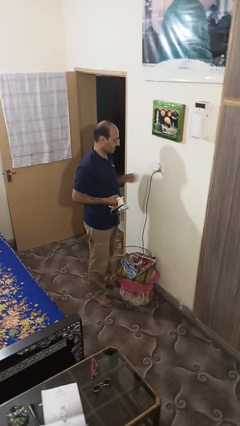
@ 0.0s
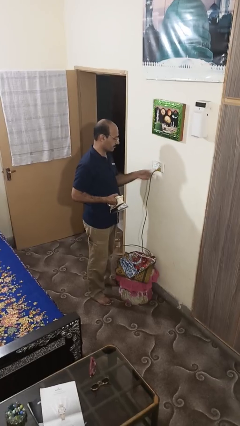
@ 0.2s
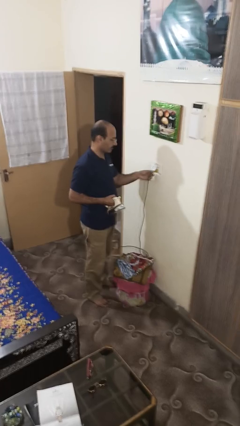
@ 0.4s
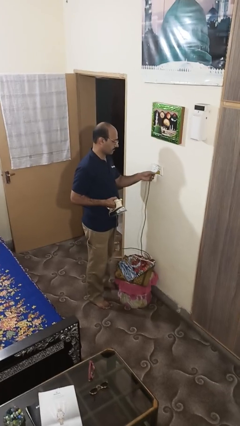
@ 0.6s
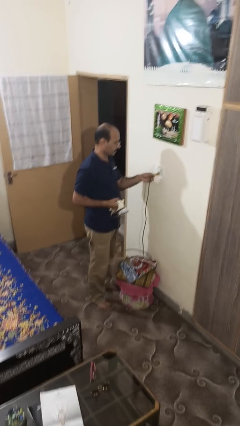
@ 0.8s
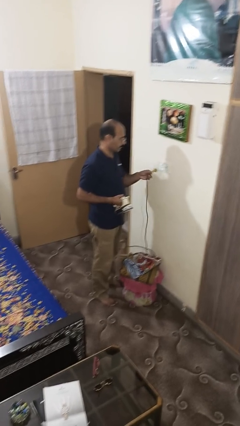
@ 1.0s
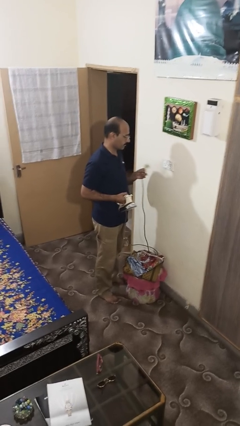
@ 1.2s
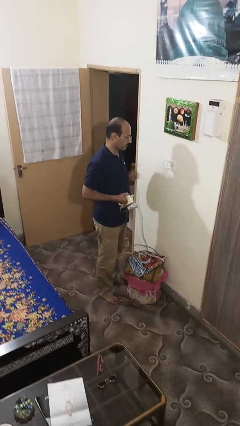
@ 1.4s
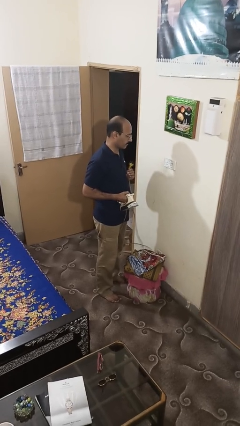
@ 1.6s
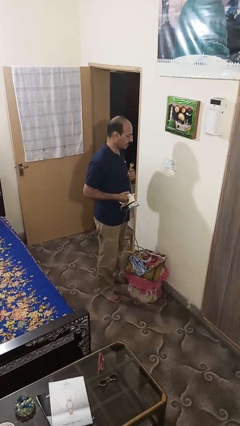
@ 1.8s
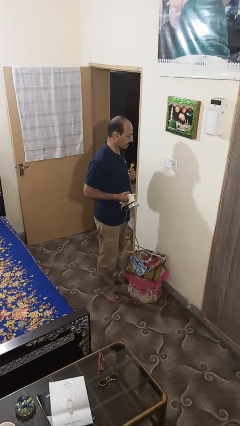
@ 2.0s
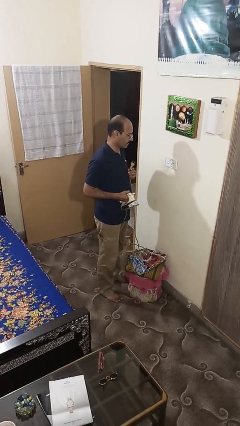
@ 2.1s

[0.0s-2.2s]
person unplugs from electrical socket

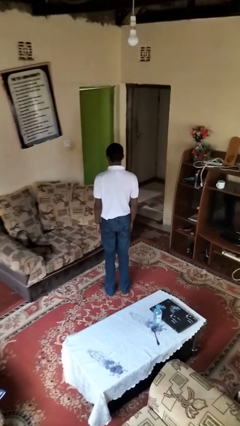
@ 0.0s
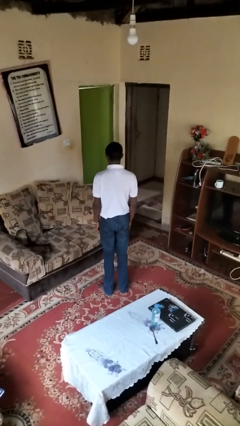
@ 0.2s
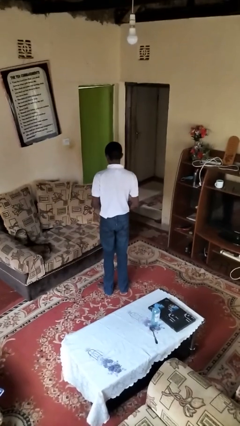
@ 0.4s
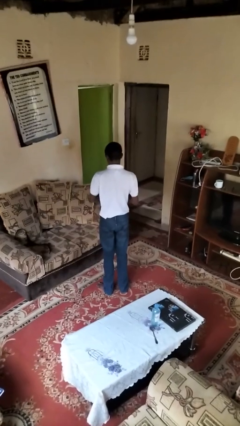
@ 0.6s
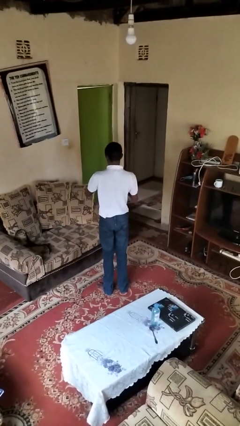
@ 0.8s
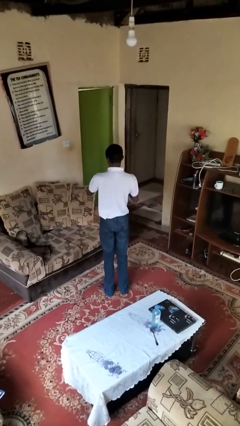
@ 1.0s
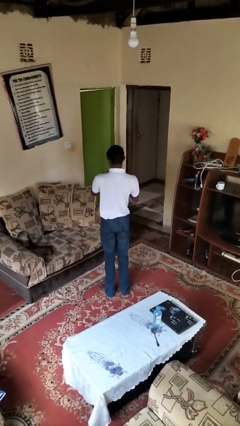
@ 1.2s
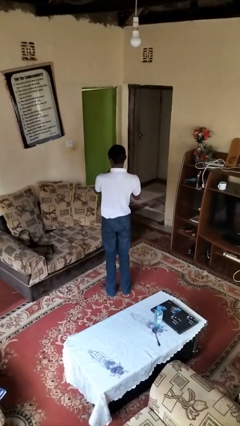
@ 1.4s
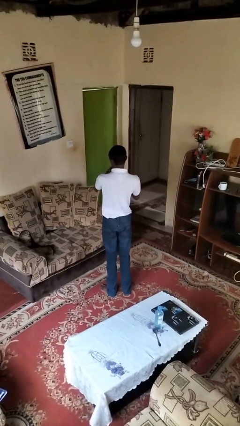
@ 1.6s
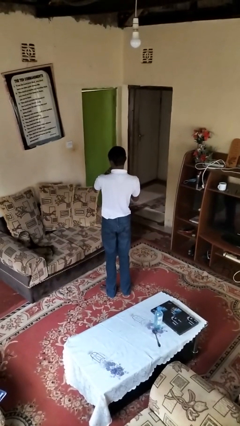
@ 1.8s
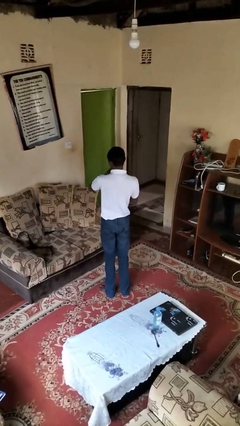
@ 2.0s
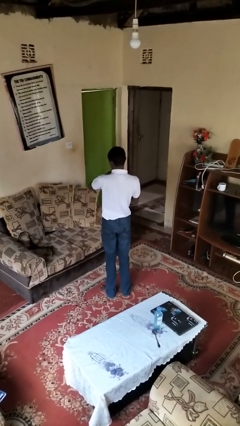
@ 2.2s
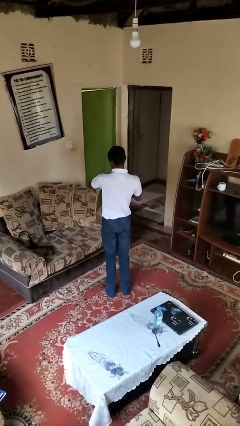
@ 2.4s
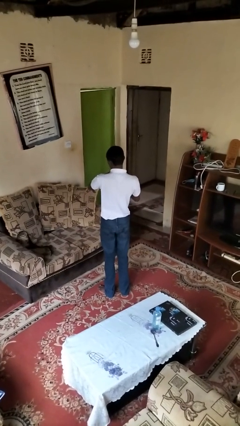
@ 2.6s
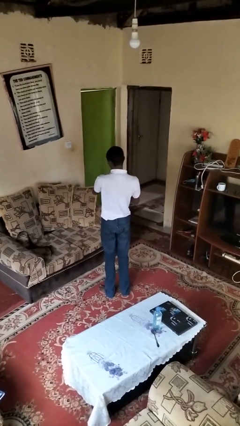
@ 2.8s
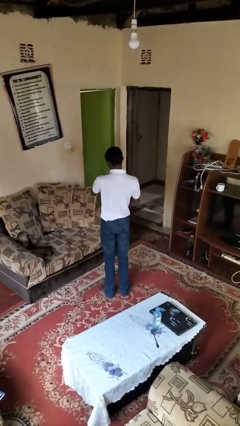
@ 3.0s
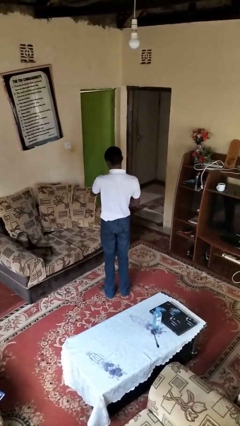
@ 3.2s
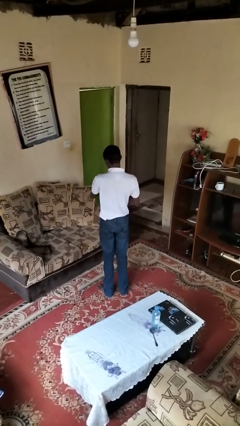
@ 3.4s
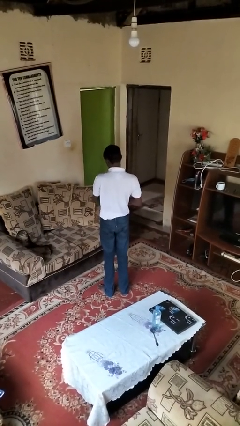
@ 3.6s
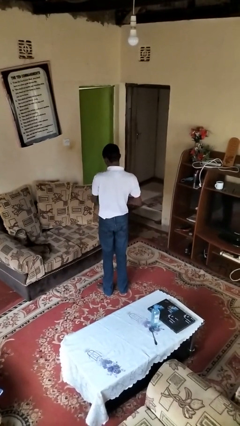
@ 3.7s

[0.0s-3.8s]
person puts on wristwatch

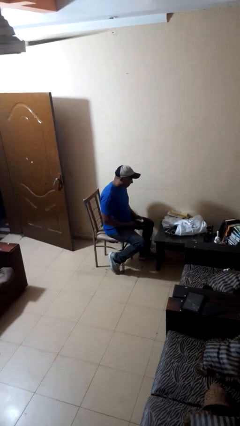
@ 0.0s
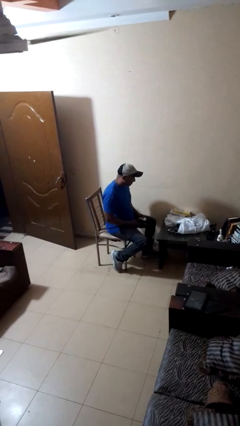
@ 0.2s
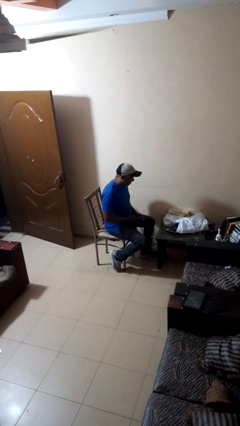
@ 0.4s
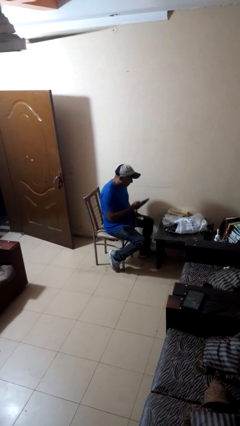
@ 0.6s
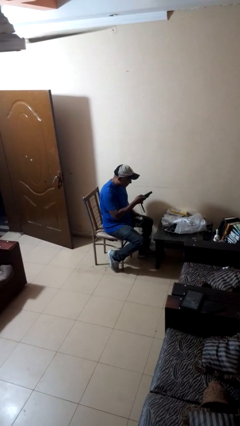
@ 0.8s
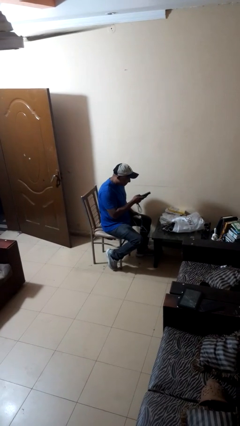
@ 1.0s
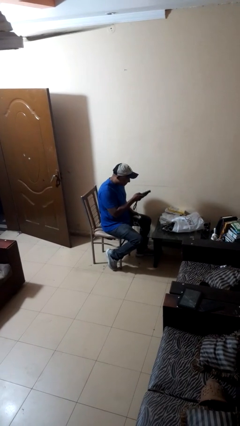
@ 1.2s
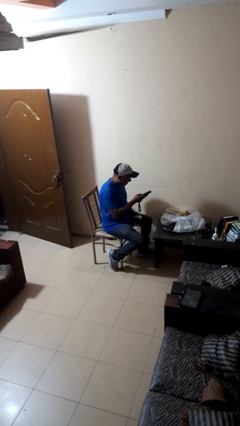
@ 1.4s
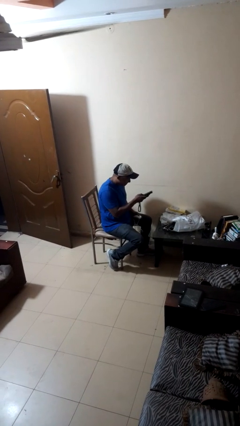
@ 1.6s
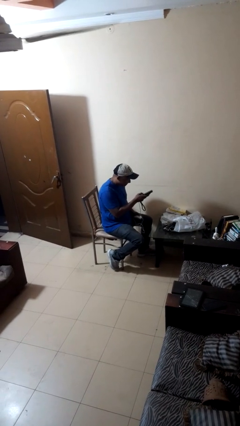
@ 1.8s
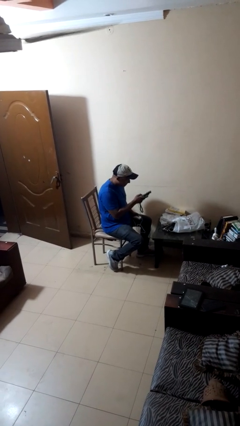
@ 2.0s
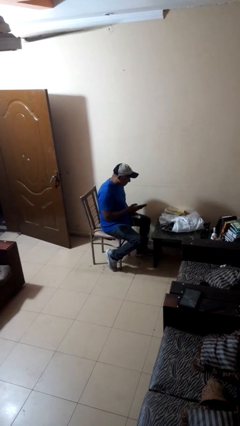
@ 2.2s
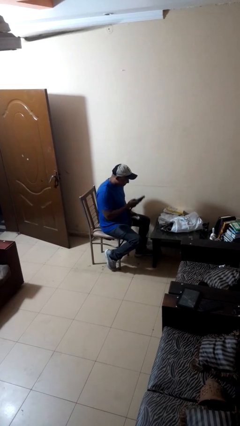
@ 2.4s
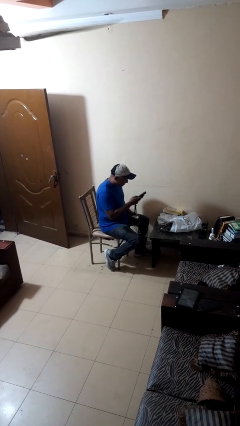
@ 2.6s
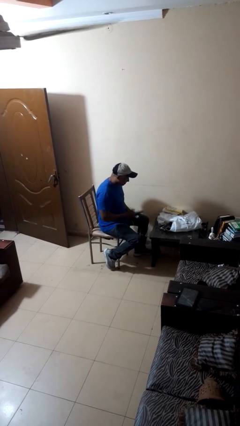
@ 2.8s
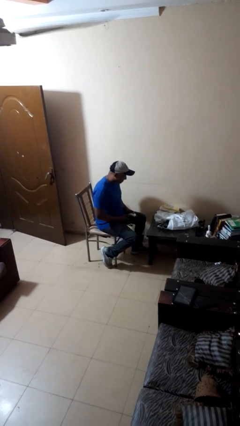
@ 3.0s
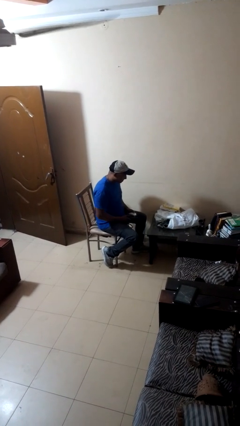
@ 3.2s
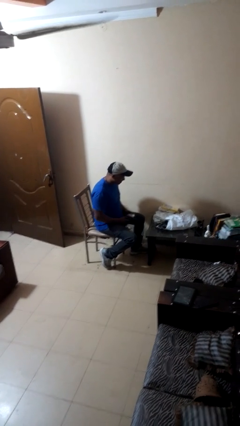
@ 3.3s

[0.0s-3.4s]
person interacts with handheld game

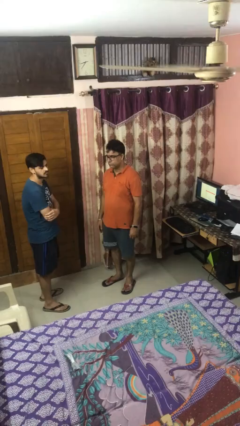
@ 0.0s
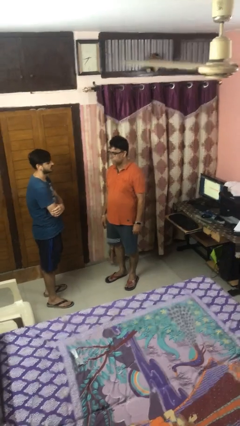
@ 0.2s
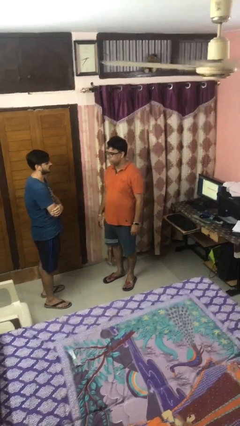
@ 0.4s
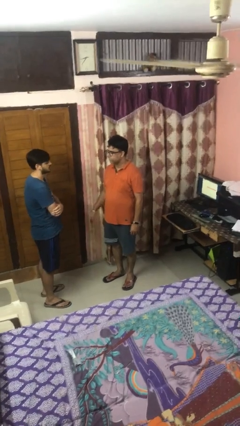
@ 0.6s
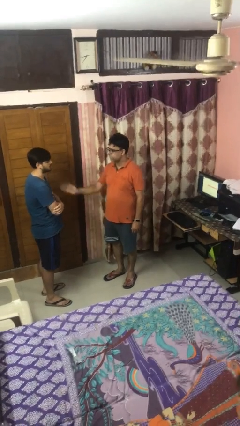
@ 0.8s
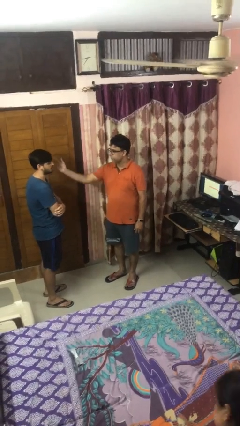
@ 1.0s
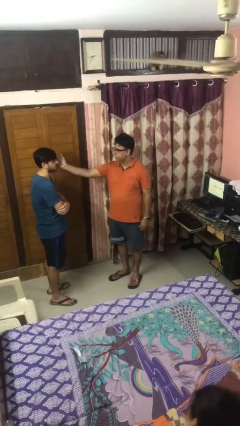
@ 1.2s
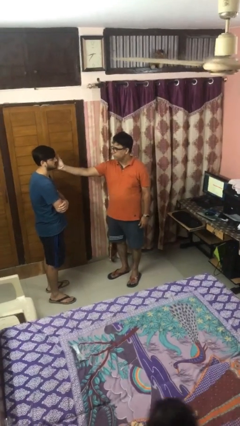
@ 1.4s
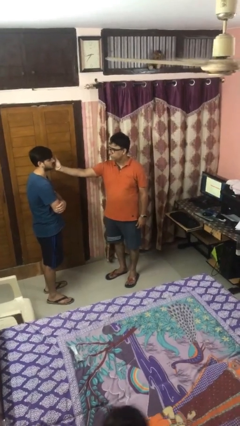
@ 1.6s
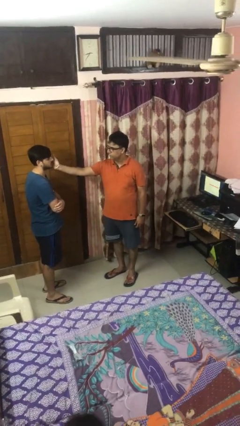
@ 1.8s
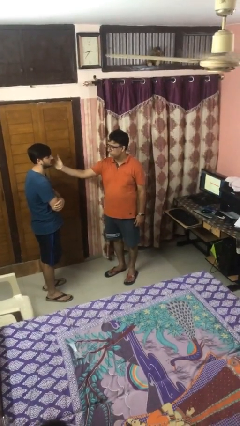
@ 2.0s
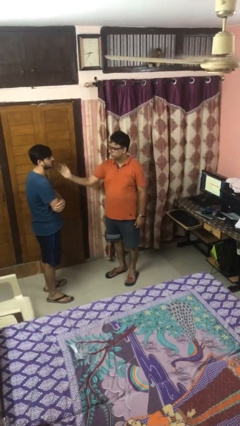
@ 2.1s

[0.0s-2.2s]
person touches face of person

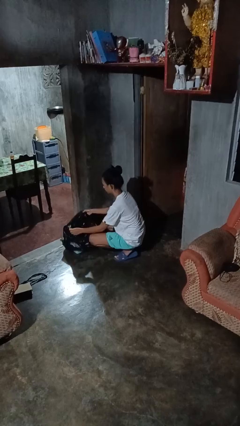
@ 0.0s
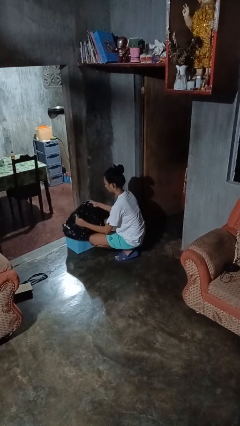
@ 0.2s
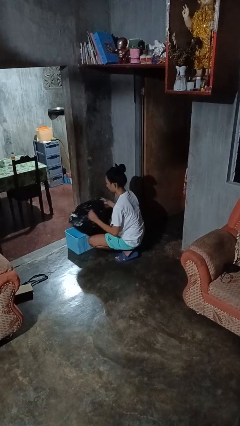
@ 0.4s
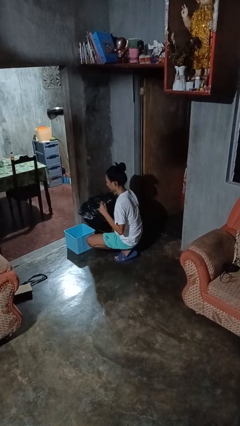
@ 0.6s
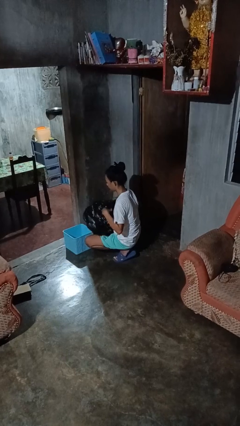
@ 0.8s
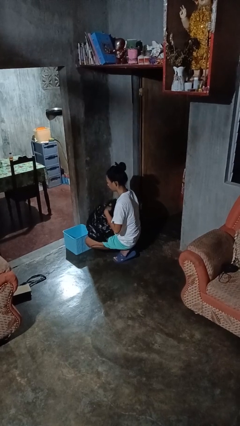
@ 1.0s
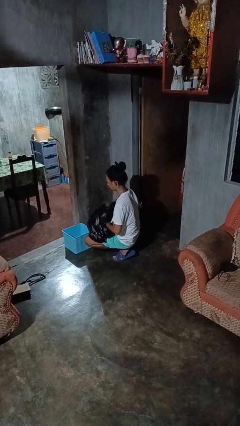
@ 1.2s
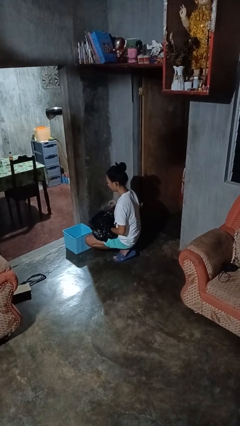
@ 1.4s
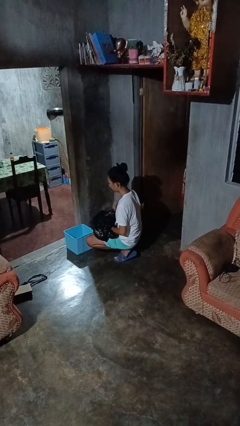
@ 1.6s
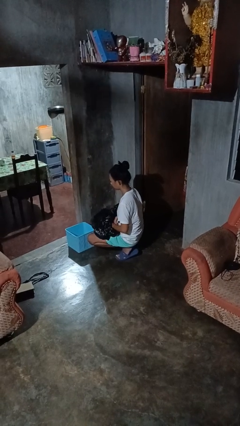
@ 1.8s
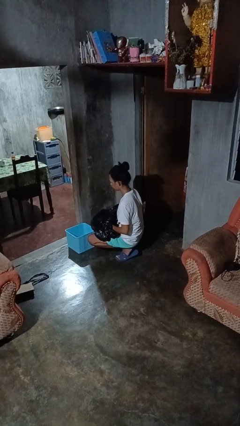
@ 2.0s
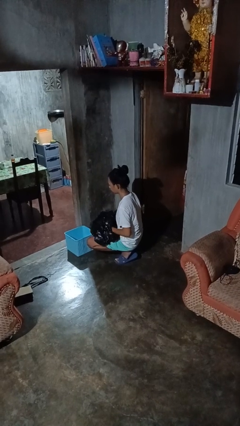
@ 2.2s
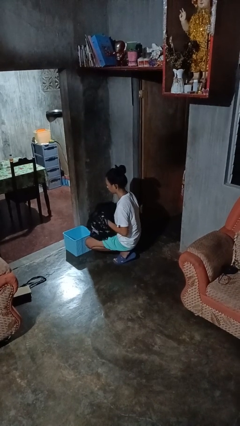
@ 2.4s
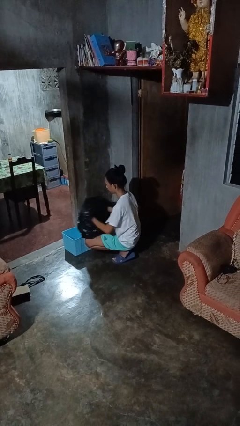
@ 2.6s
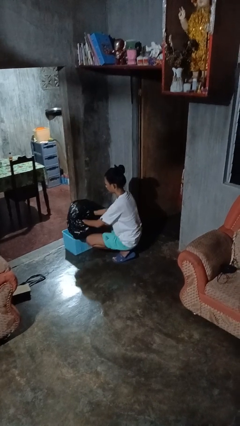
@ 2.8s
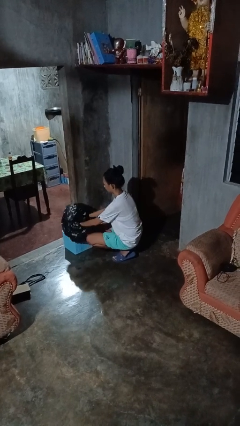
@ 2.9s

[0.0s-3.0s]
person removes trashbag from trashcan

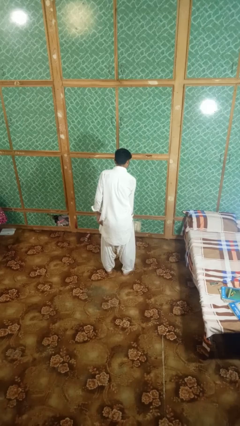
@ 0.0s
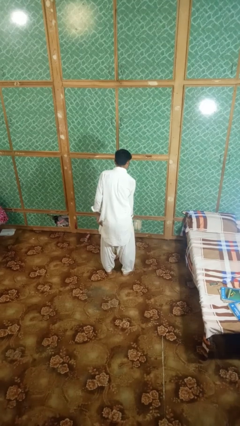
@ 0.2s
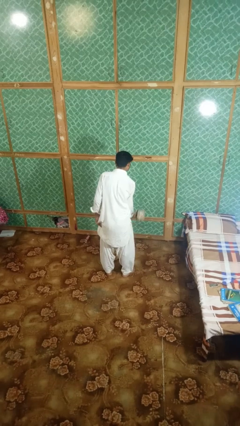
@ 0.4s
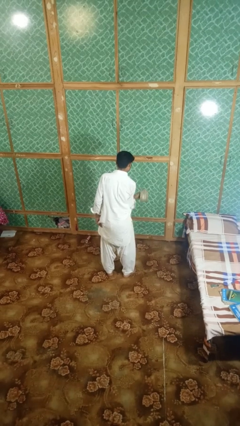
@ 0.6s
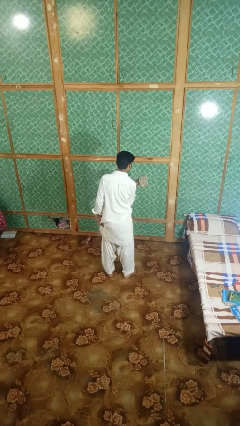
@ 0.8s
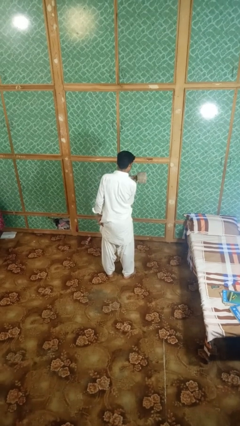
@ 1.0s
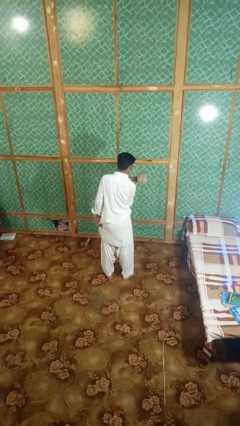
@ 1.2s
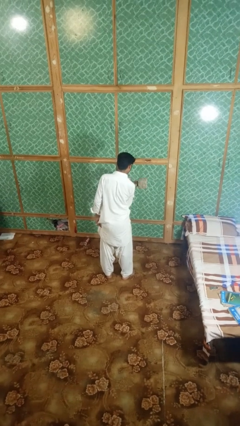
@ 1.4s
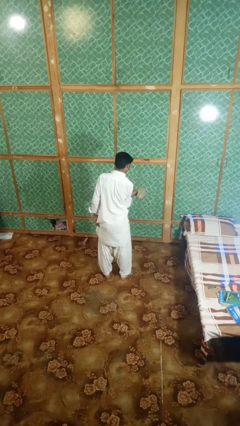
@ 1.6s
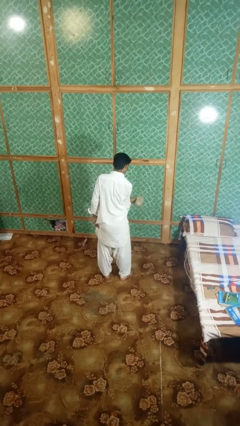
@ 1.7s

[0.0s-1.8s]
person lifts dumbbells

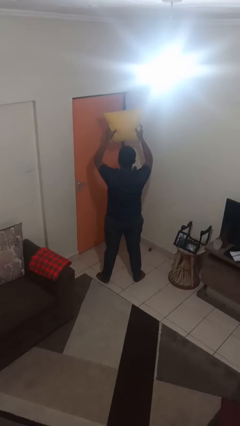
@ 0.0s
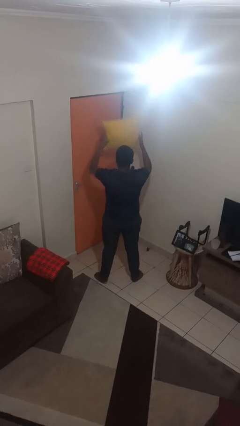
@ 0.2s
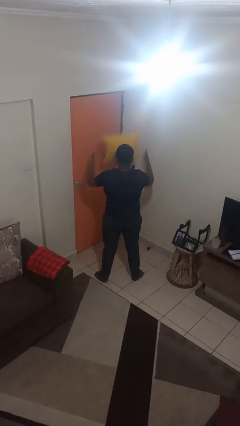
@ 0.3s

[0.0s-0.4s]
person drops object
